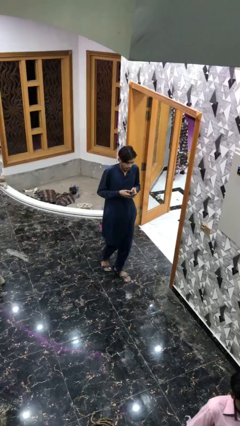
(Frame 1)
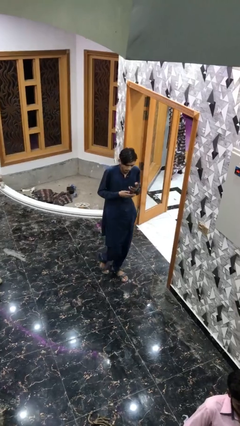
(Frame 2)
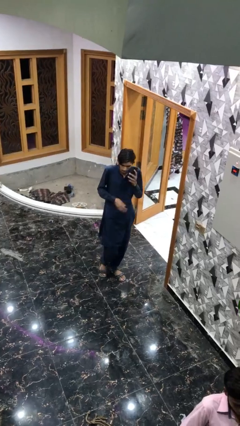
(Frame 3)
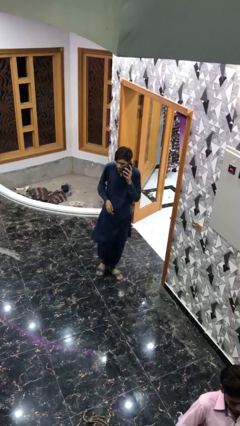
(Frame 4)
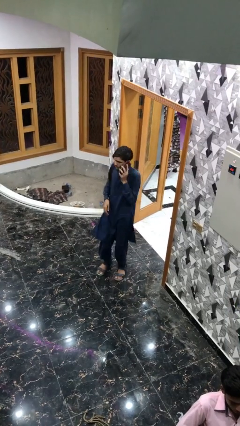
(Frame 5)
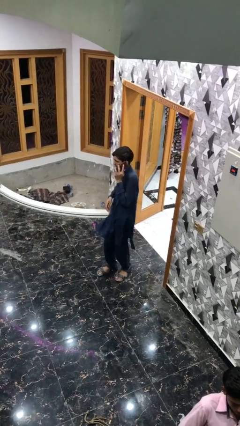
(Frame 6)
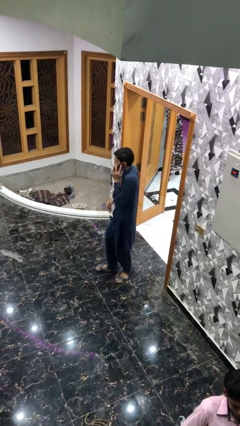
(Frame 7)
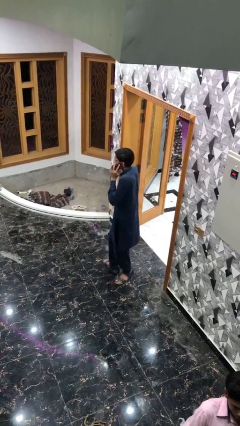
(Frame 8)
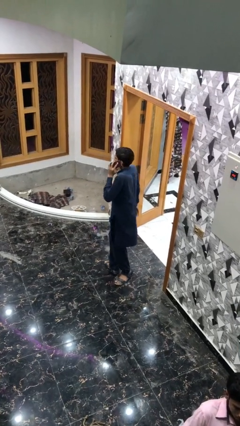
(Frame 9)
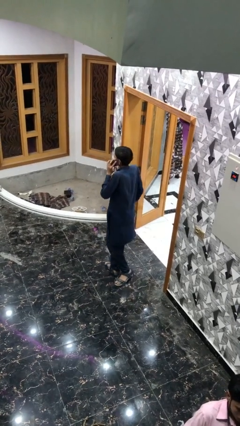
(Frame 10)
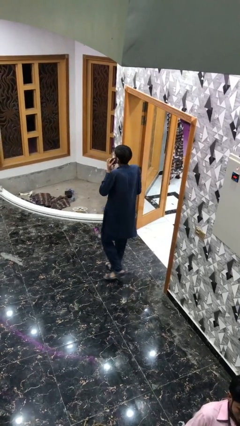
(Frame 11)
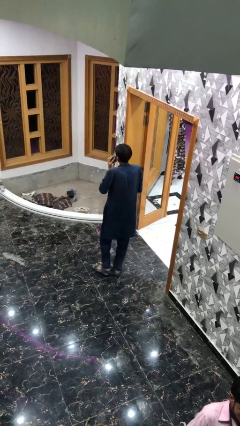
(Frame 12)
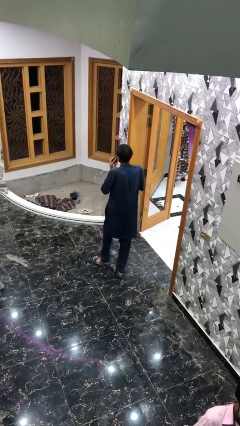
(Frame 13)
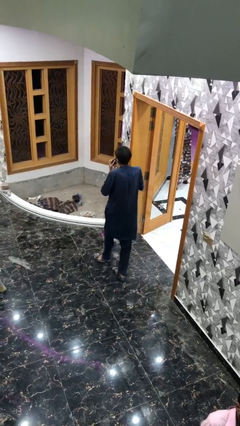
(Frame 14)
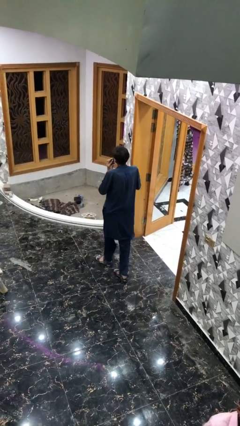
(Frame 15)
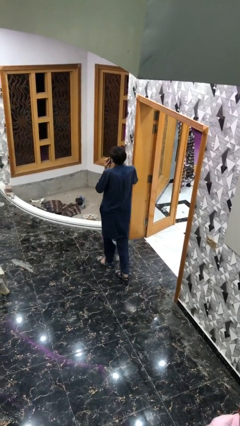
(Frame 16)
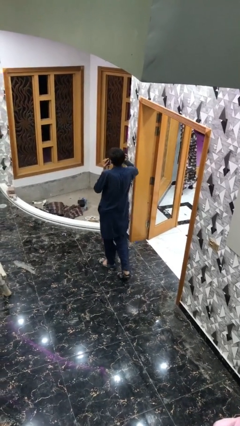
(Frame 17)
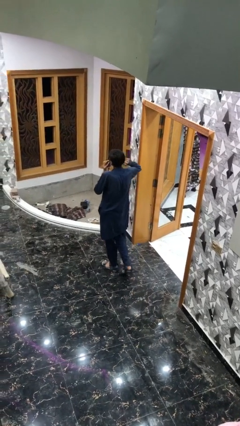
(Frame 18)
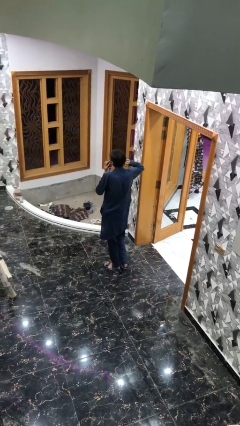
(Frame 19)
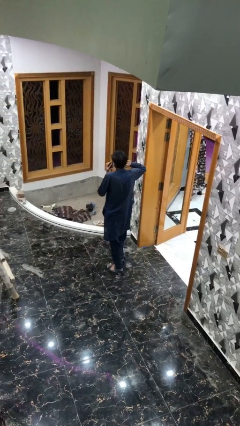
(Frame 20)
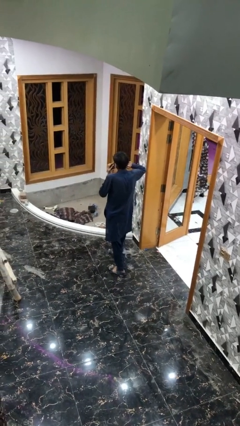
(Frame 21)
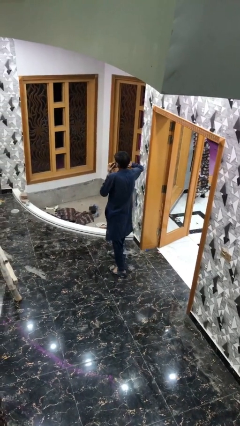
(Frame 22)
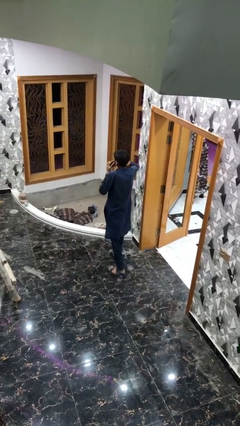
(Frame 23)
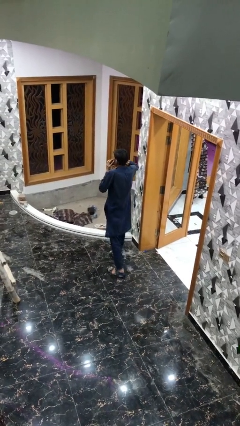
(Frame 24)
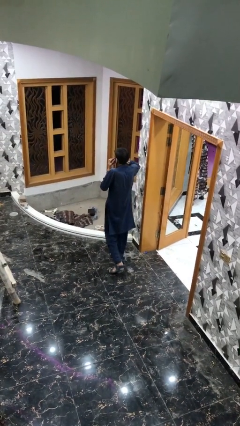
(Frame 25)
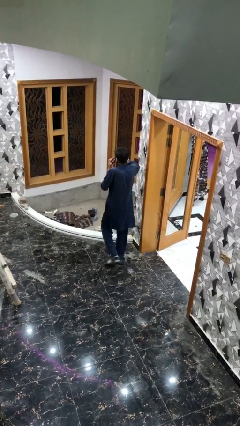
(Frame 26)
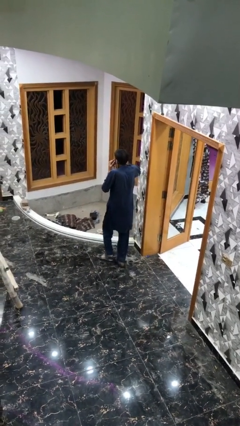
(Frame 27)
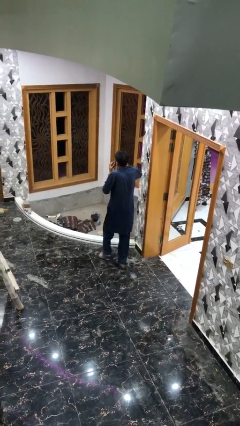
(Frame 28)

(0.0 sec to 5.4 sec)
person talks on phone

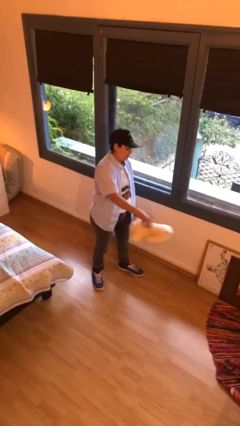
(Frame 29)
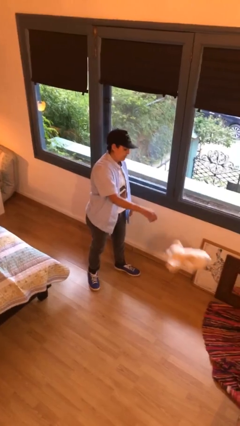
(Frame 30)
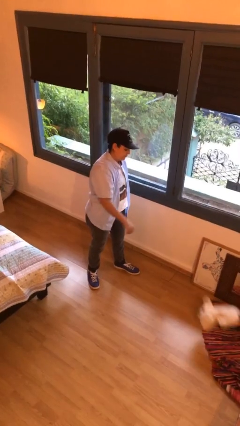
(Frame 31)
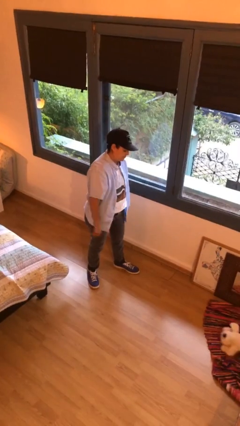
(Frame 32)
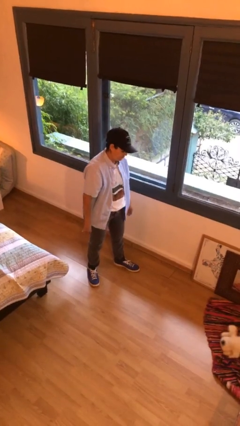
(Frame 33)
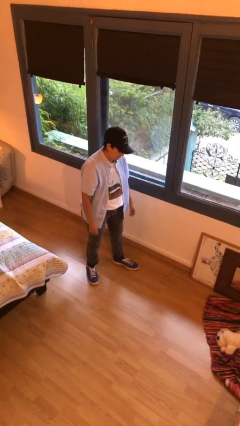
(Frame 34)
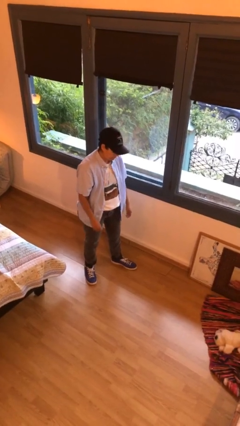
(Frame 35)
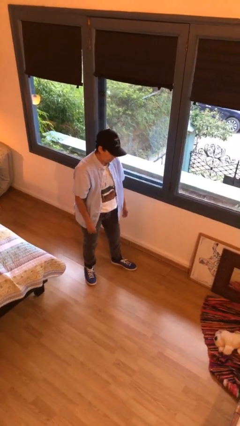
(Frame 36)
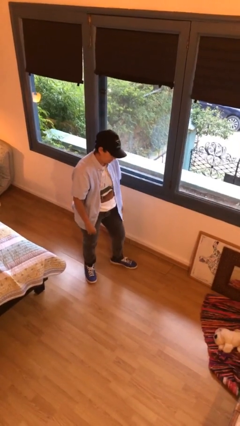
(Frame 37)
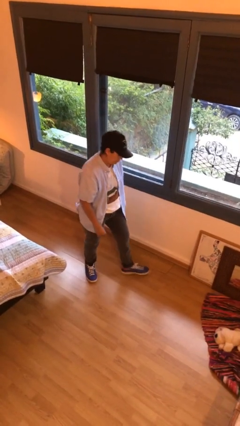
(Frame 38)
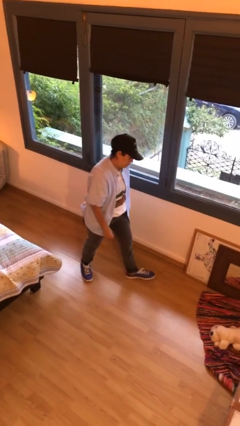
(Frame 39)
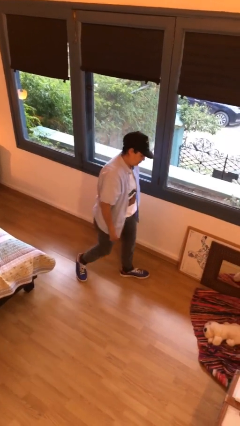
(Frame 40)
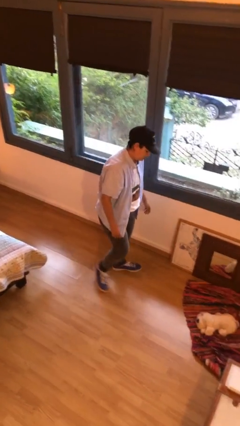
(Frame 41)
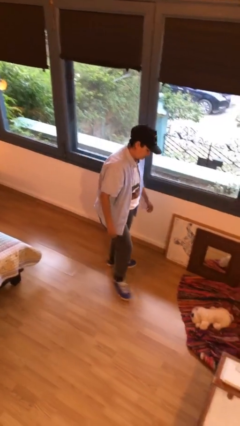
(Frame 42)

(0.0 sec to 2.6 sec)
person throws object to ground

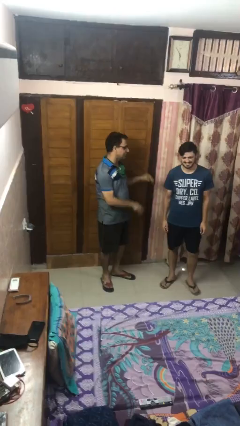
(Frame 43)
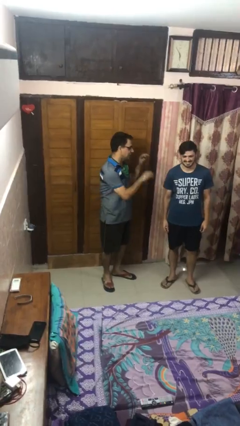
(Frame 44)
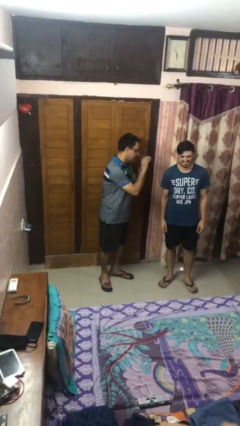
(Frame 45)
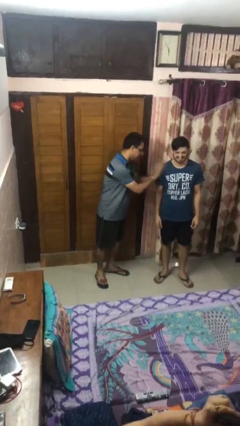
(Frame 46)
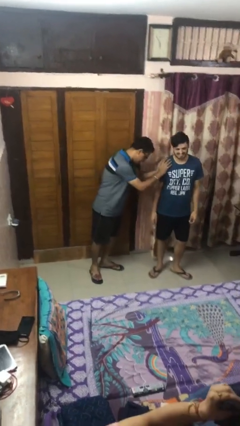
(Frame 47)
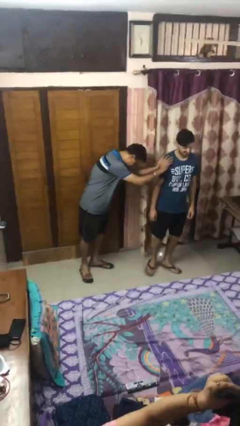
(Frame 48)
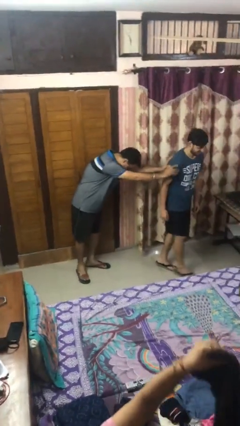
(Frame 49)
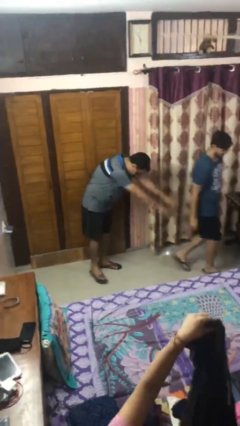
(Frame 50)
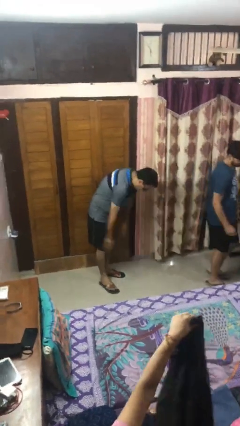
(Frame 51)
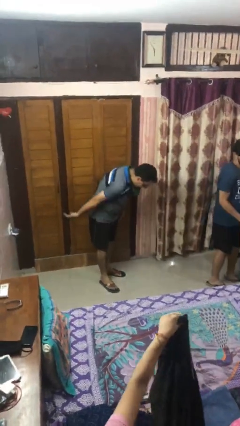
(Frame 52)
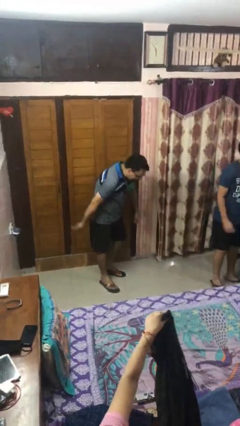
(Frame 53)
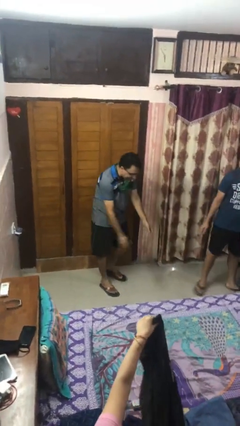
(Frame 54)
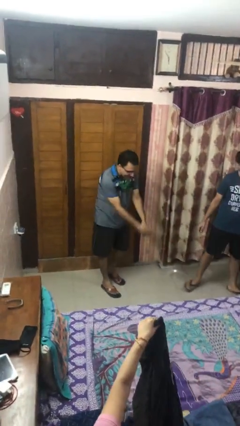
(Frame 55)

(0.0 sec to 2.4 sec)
person shoves person

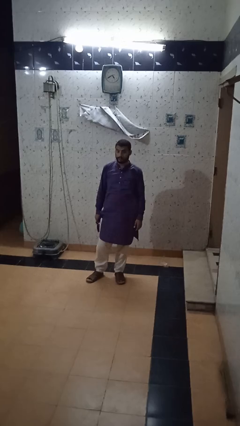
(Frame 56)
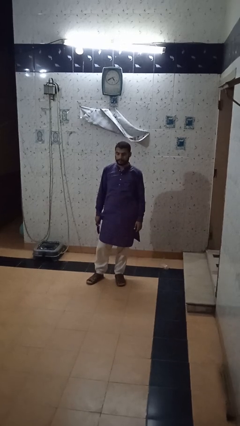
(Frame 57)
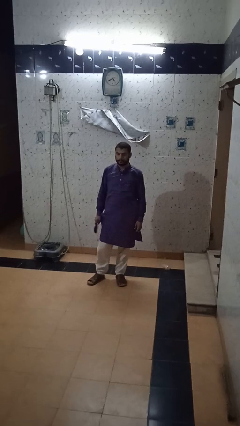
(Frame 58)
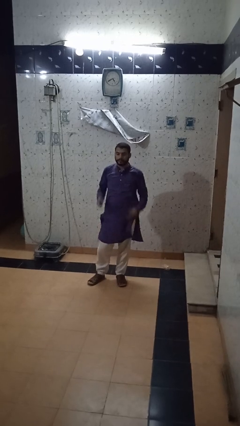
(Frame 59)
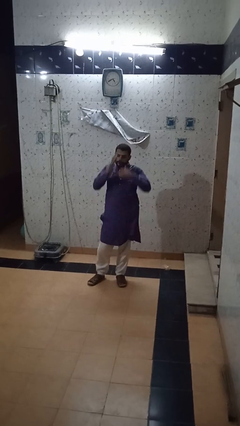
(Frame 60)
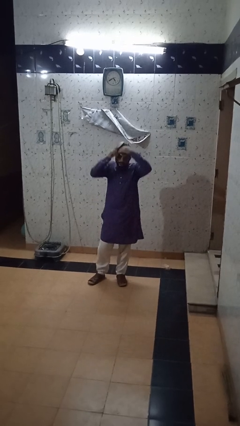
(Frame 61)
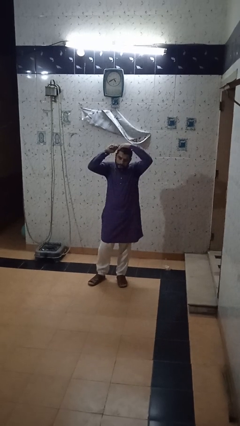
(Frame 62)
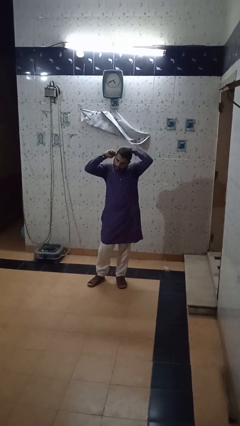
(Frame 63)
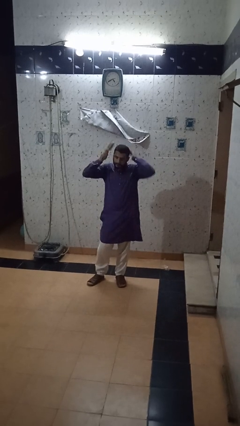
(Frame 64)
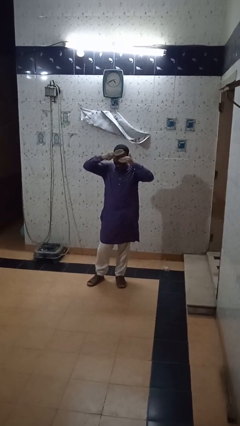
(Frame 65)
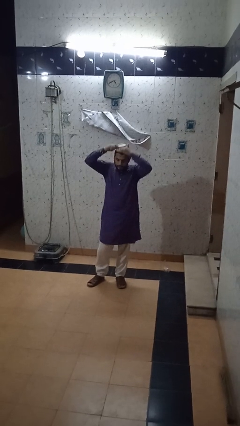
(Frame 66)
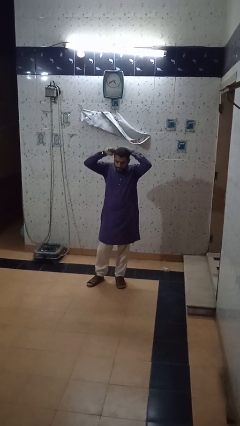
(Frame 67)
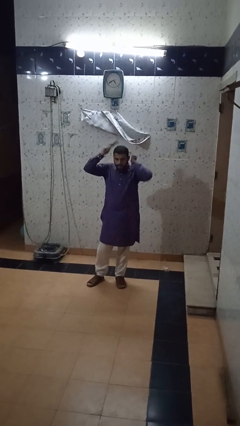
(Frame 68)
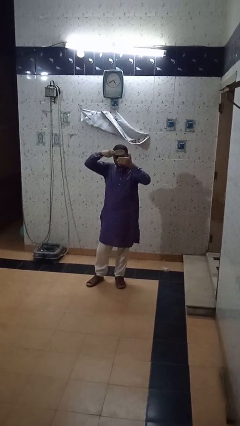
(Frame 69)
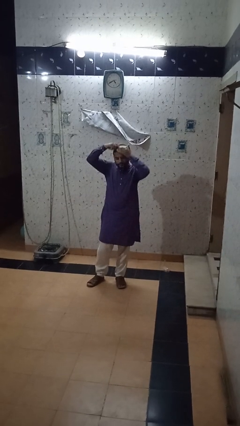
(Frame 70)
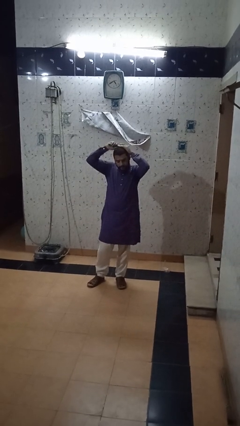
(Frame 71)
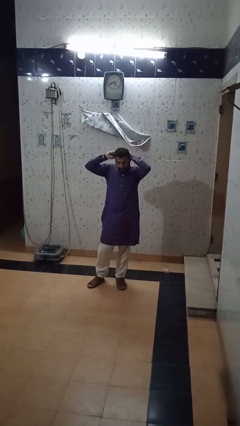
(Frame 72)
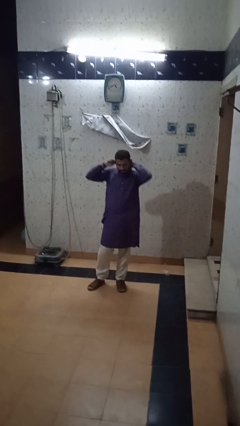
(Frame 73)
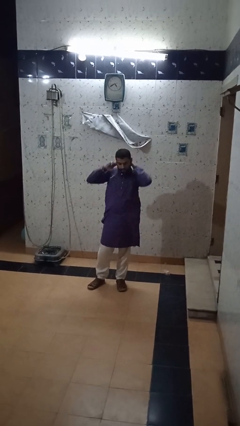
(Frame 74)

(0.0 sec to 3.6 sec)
person brushes hair

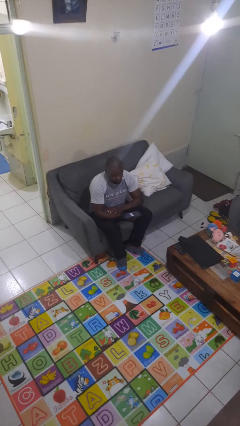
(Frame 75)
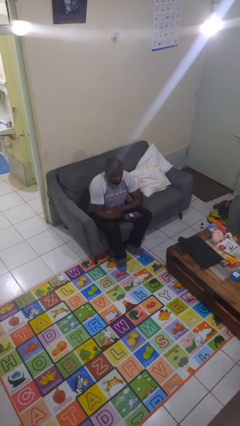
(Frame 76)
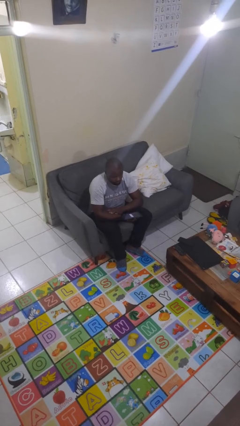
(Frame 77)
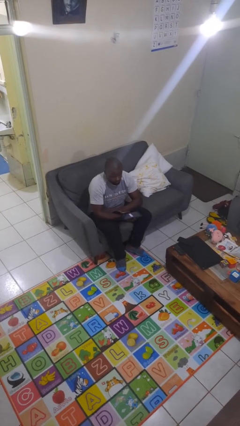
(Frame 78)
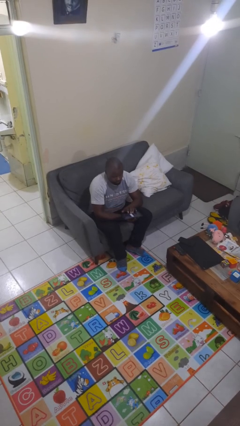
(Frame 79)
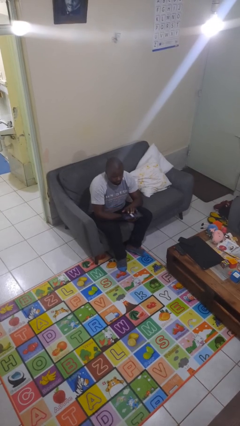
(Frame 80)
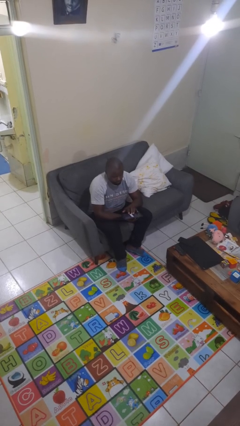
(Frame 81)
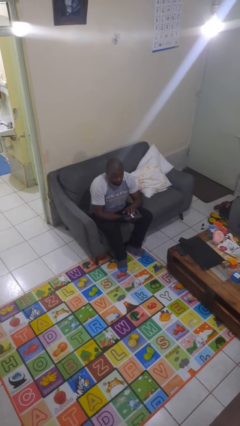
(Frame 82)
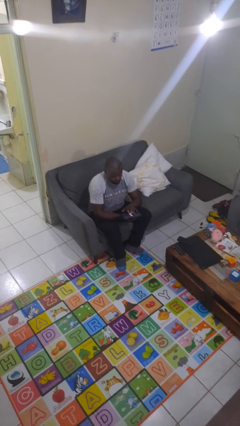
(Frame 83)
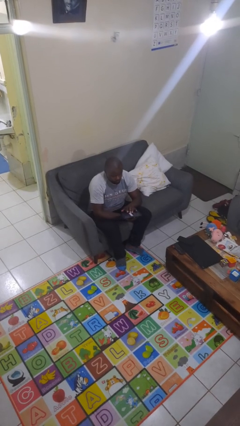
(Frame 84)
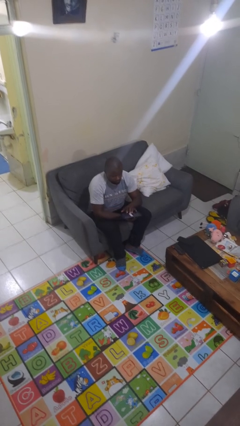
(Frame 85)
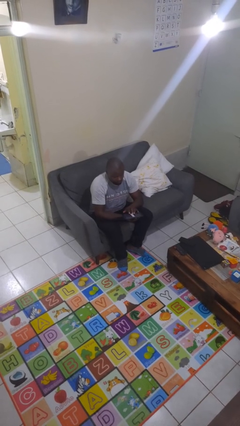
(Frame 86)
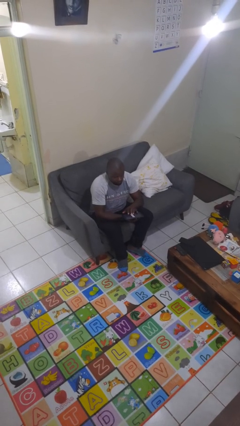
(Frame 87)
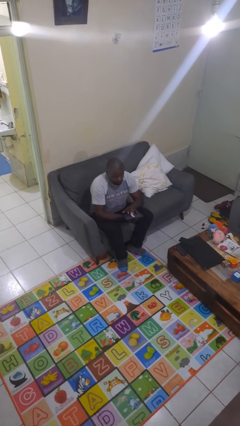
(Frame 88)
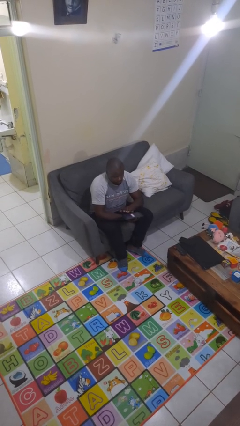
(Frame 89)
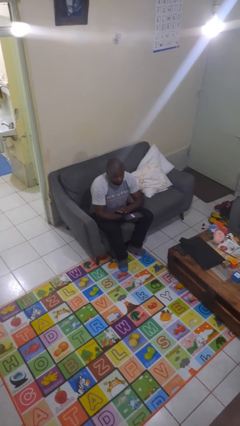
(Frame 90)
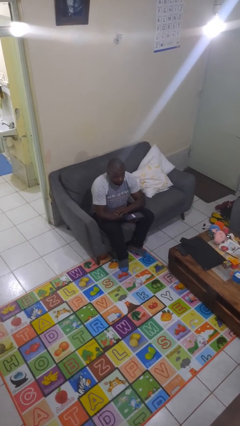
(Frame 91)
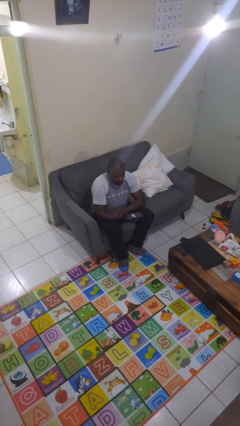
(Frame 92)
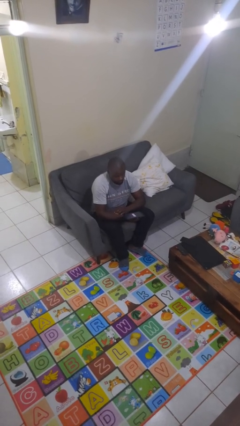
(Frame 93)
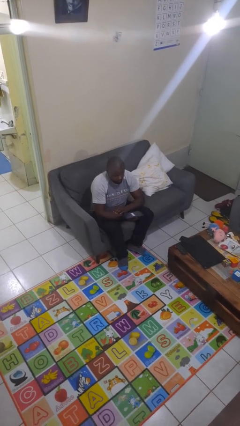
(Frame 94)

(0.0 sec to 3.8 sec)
person interacts with tablet
